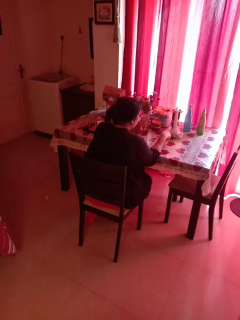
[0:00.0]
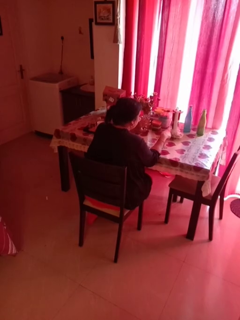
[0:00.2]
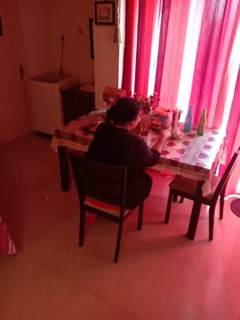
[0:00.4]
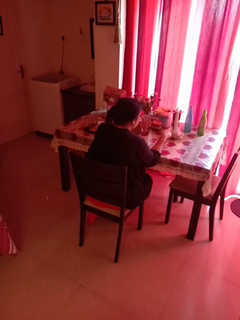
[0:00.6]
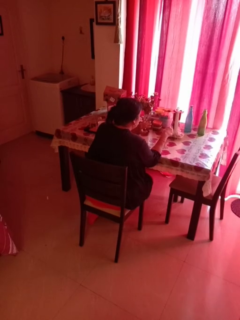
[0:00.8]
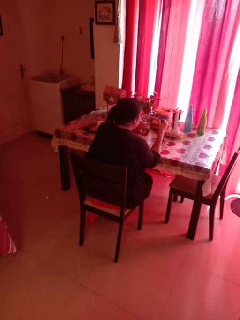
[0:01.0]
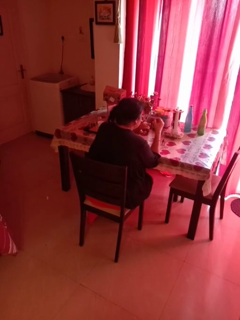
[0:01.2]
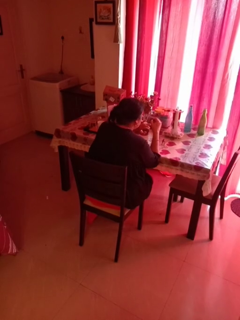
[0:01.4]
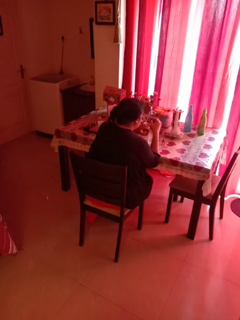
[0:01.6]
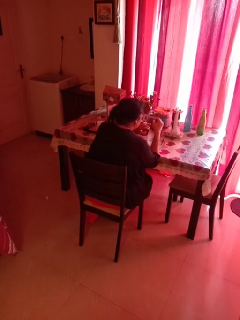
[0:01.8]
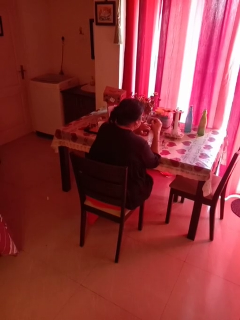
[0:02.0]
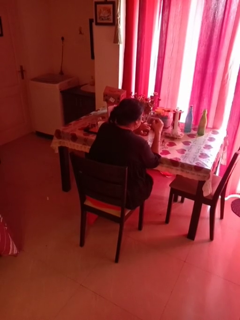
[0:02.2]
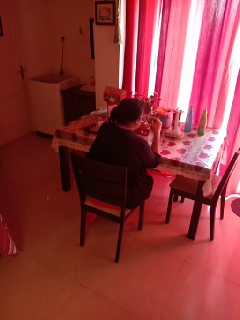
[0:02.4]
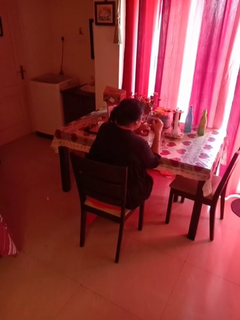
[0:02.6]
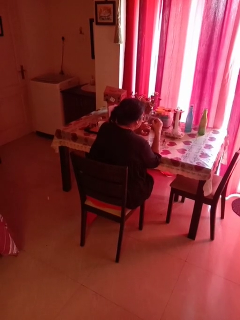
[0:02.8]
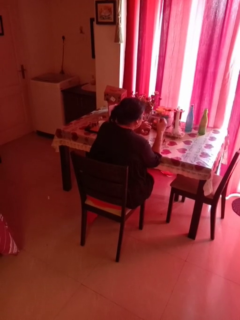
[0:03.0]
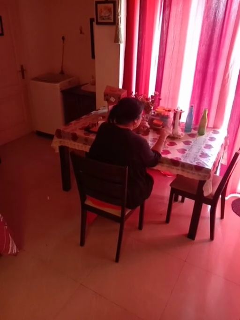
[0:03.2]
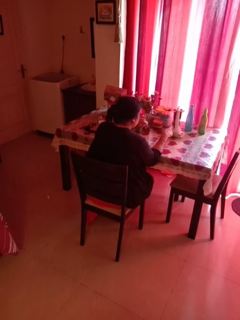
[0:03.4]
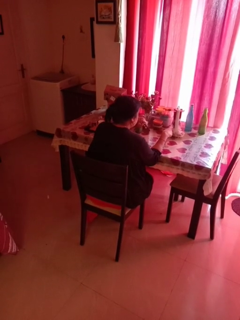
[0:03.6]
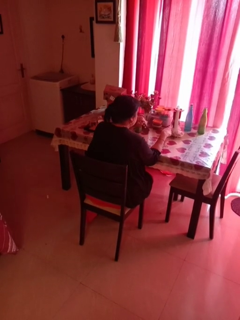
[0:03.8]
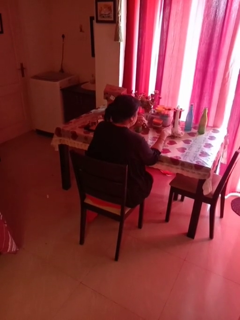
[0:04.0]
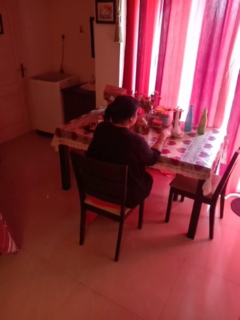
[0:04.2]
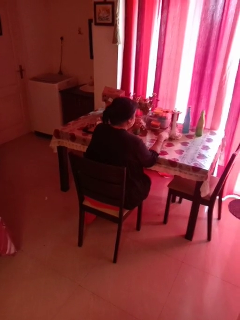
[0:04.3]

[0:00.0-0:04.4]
person paints fingernails

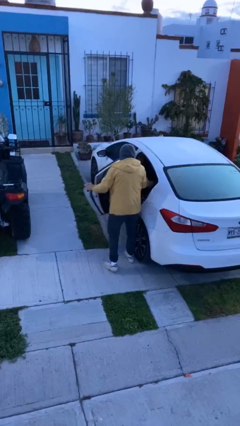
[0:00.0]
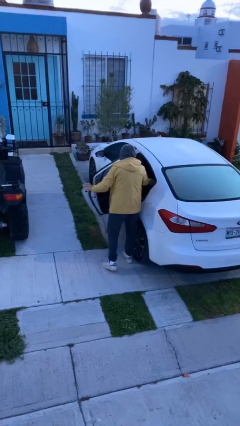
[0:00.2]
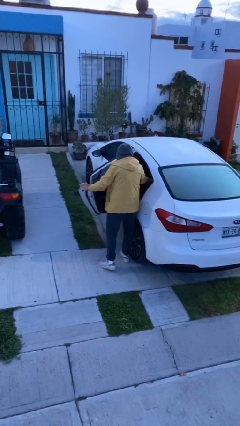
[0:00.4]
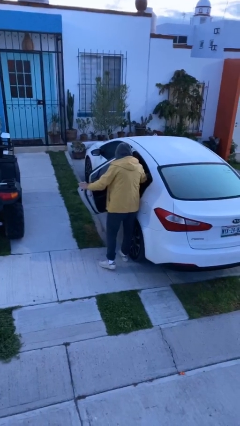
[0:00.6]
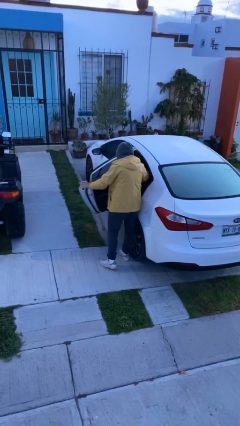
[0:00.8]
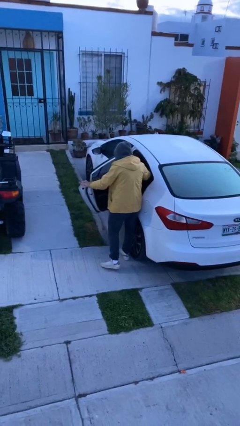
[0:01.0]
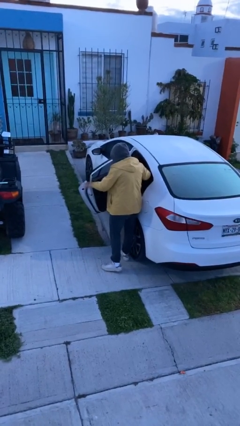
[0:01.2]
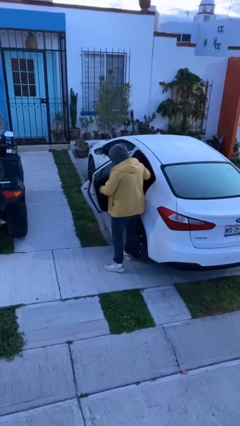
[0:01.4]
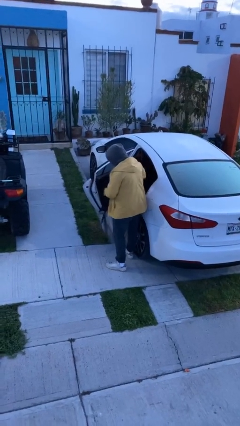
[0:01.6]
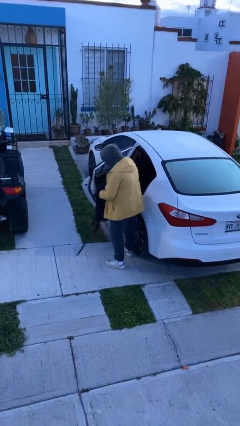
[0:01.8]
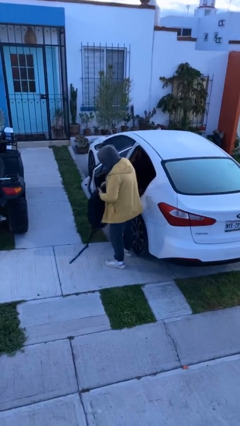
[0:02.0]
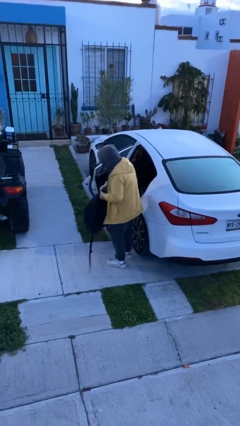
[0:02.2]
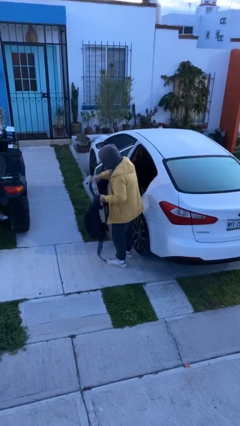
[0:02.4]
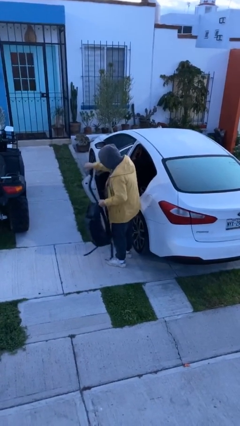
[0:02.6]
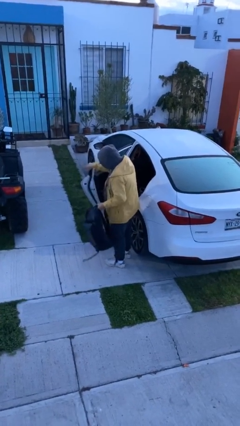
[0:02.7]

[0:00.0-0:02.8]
person unloads car

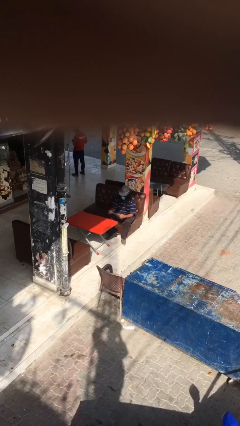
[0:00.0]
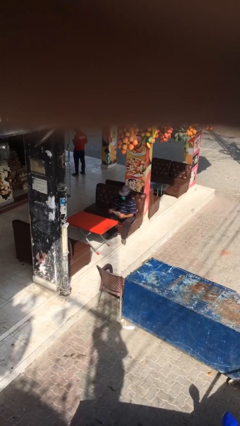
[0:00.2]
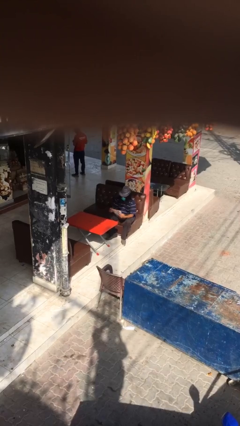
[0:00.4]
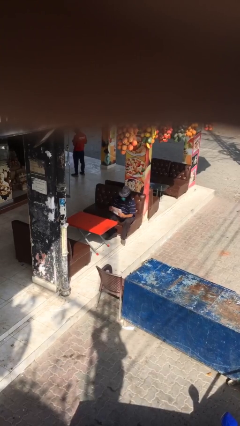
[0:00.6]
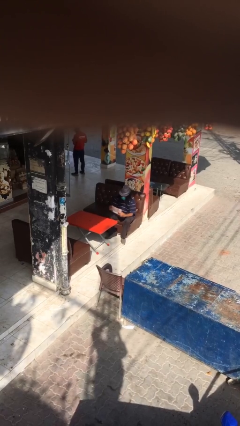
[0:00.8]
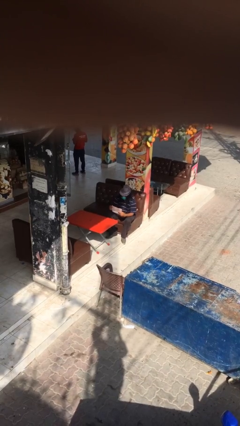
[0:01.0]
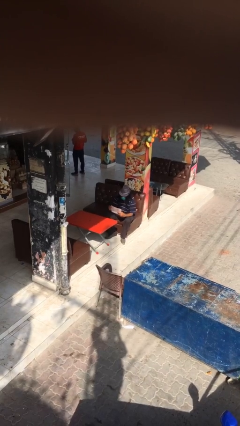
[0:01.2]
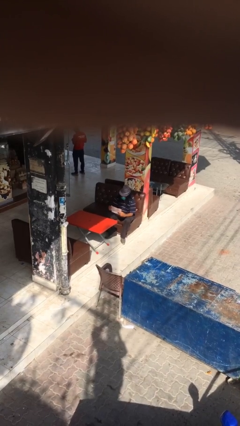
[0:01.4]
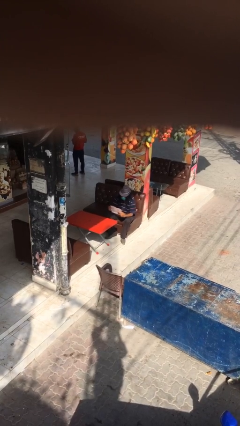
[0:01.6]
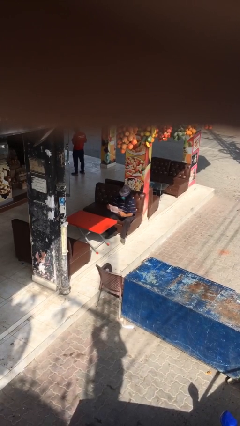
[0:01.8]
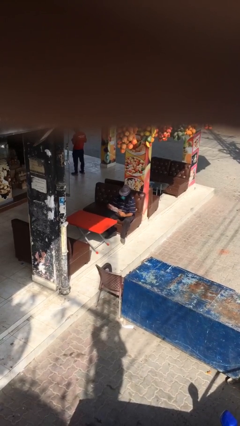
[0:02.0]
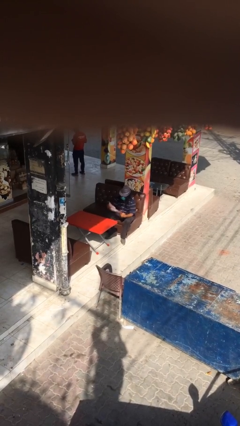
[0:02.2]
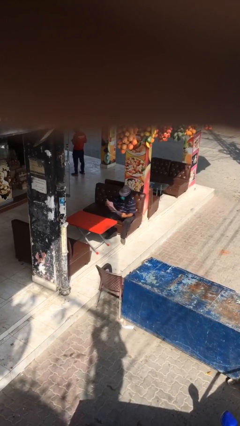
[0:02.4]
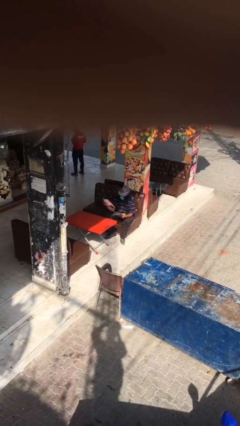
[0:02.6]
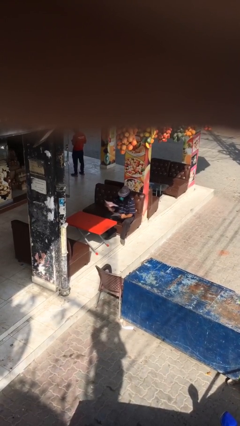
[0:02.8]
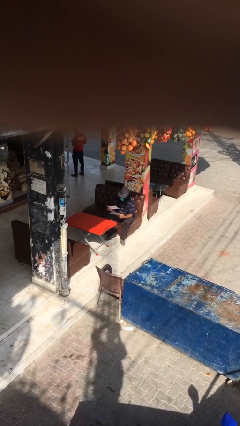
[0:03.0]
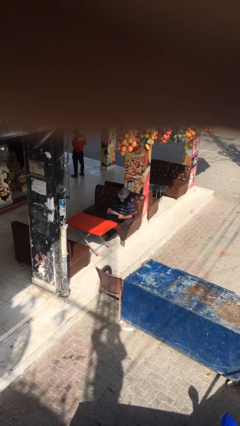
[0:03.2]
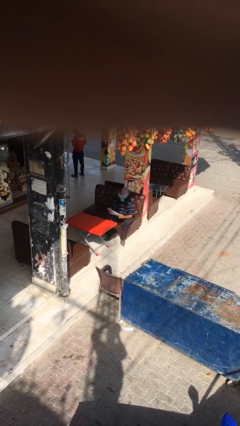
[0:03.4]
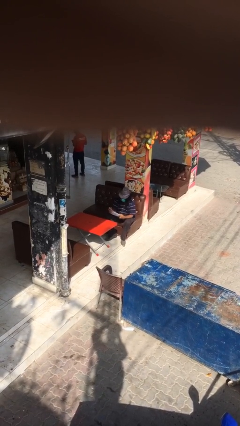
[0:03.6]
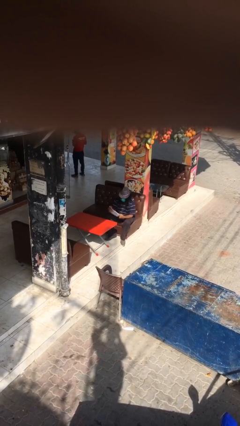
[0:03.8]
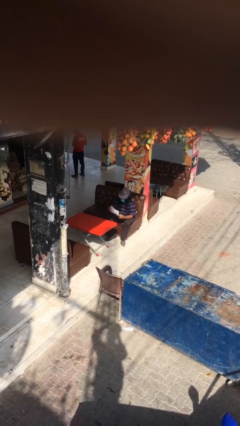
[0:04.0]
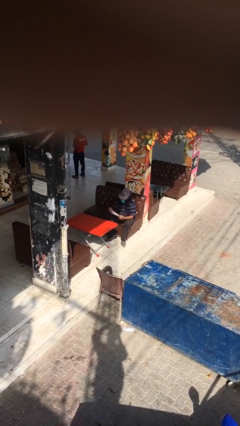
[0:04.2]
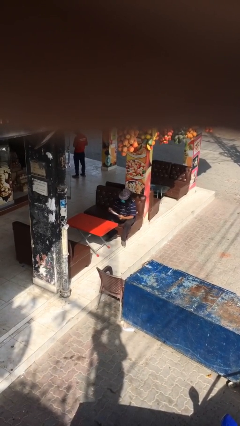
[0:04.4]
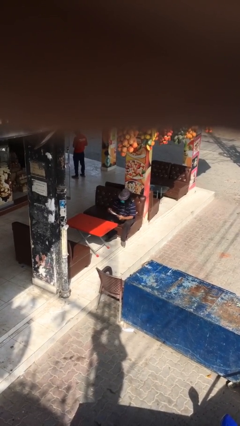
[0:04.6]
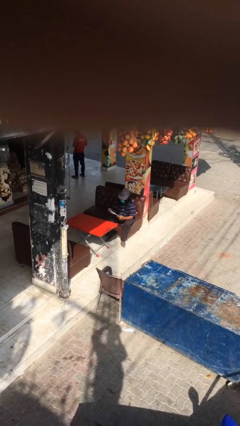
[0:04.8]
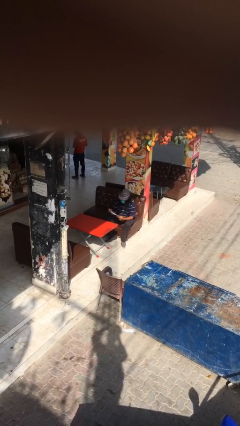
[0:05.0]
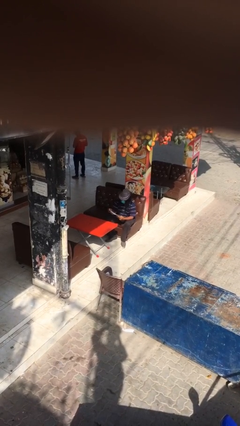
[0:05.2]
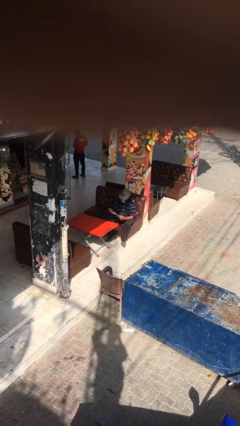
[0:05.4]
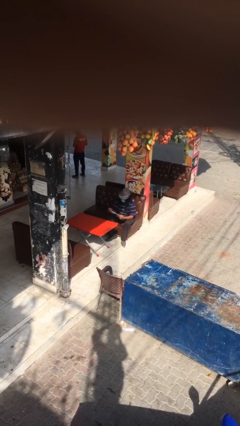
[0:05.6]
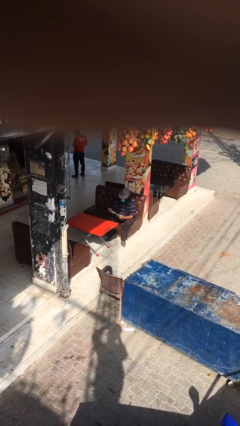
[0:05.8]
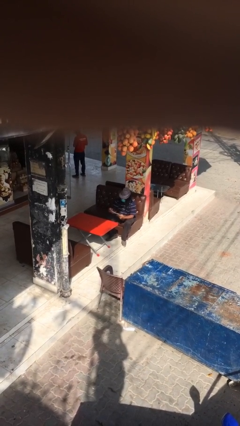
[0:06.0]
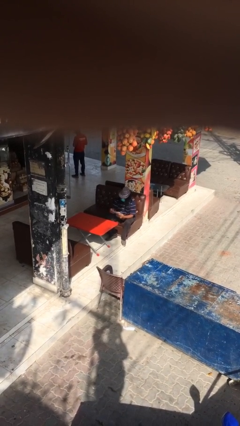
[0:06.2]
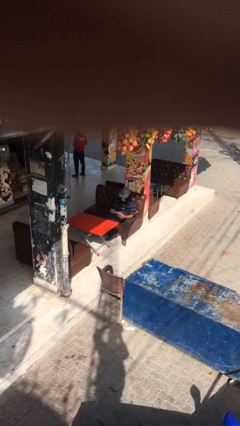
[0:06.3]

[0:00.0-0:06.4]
person reads document

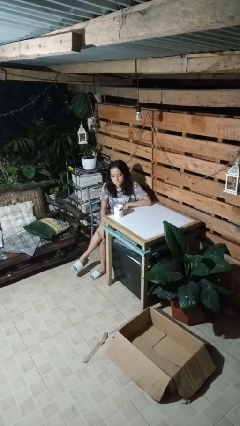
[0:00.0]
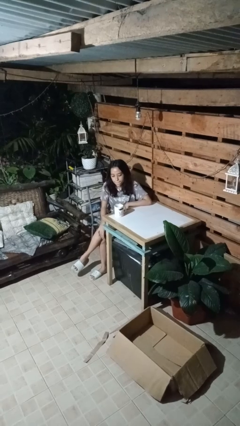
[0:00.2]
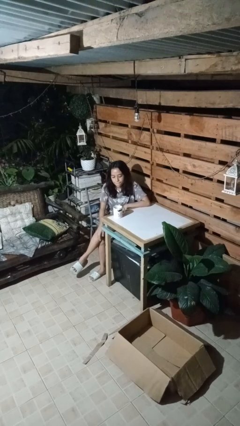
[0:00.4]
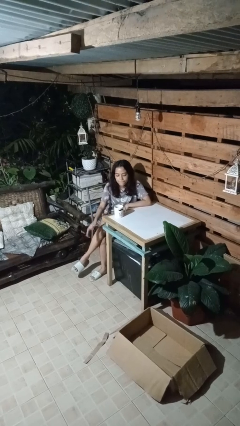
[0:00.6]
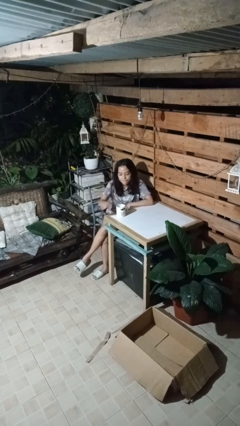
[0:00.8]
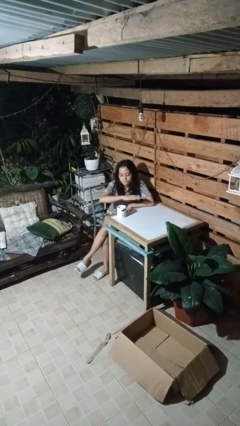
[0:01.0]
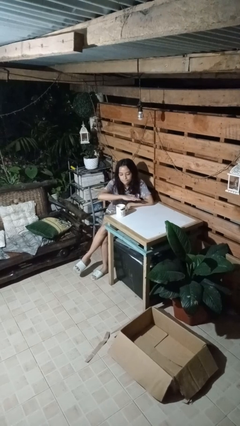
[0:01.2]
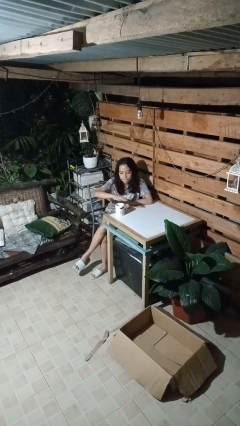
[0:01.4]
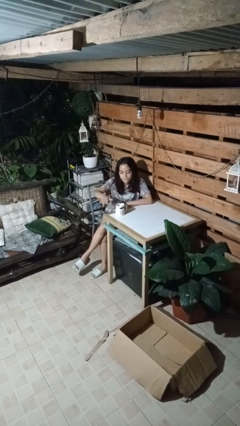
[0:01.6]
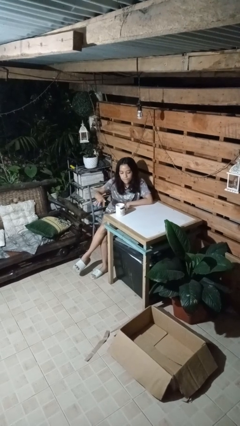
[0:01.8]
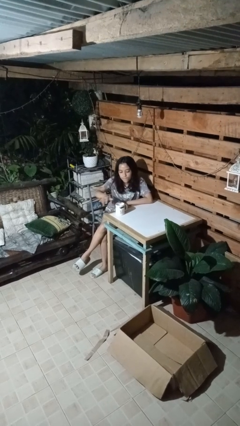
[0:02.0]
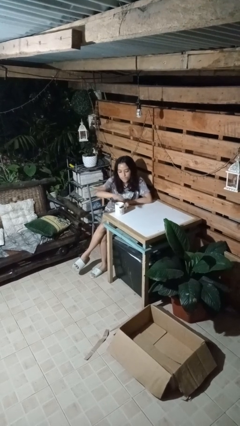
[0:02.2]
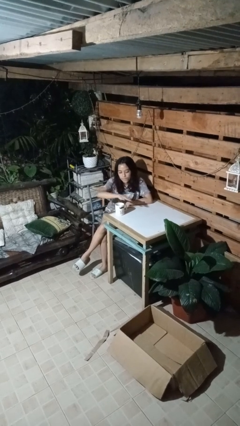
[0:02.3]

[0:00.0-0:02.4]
person waves hand over object

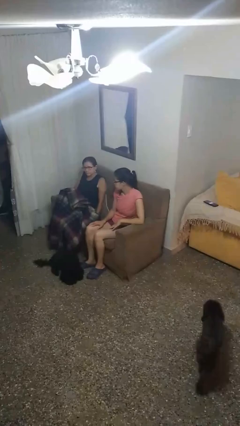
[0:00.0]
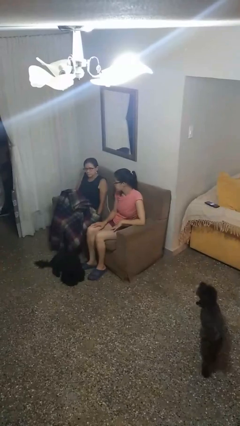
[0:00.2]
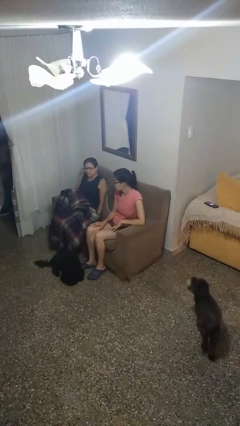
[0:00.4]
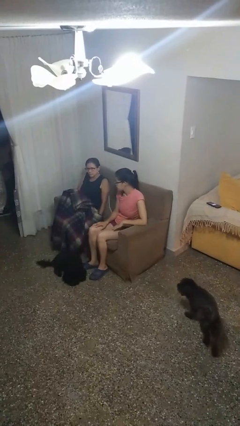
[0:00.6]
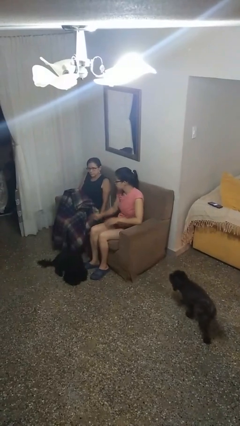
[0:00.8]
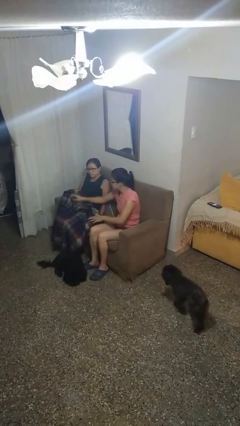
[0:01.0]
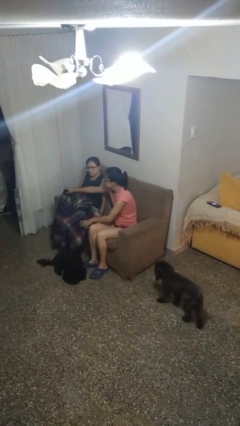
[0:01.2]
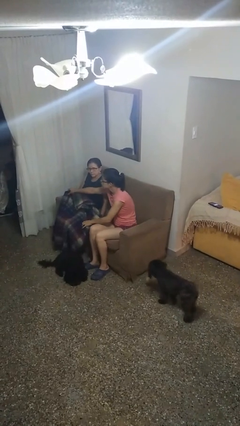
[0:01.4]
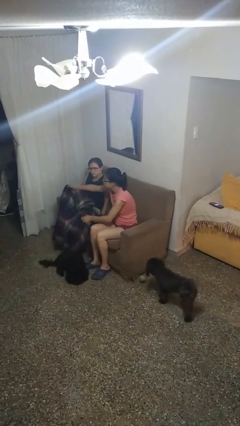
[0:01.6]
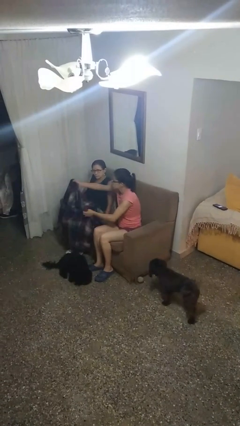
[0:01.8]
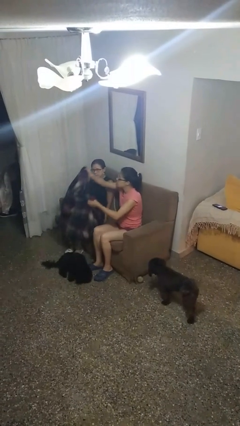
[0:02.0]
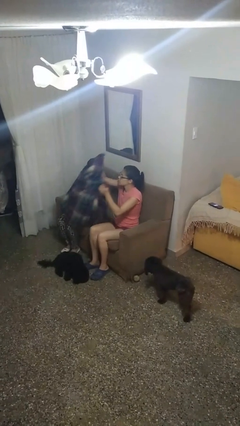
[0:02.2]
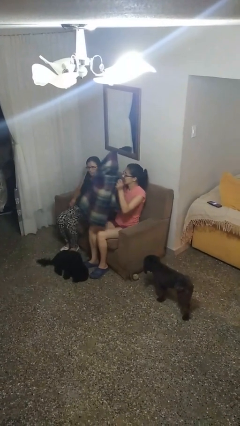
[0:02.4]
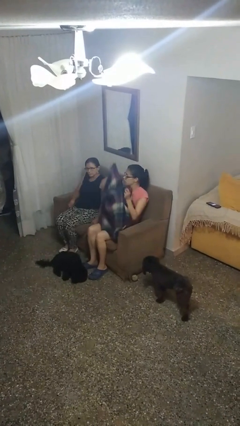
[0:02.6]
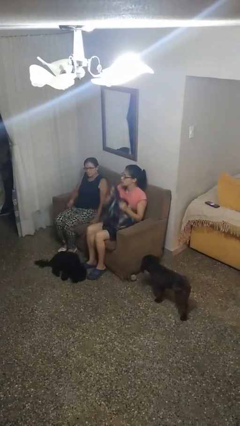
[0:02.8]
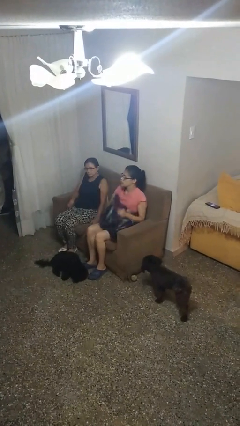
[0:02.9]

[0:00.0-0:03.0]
person uncovers friend with blanket
